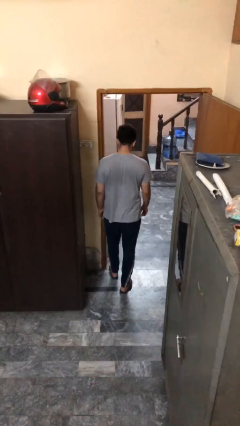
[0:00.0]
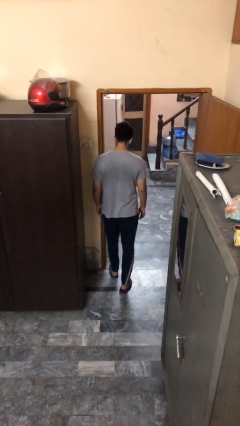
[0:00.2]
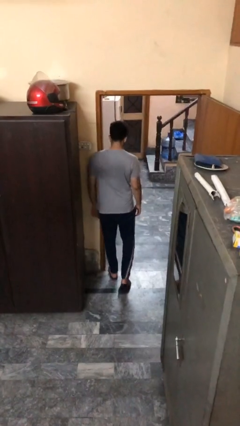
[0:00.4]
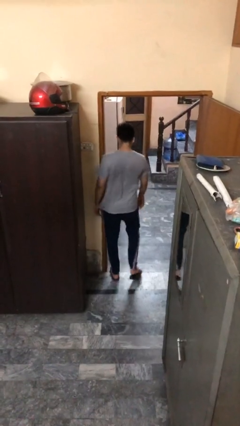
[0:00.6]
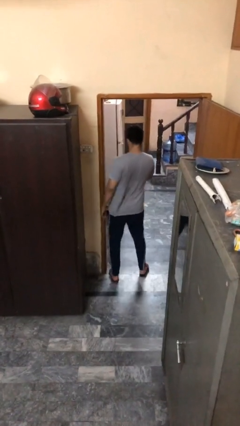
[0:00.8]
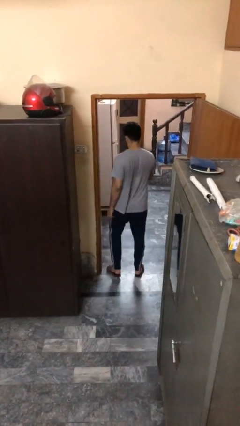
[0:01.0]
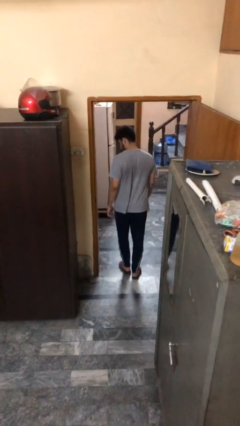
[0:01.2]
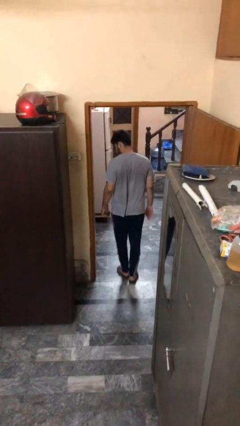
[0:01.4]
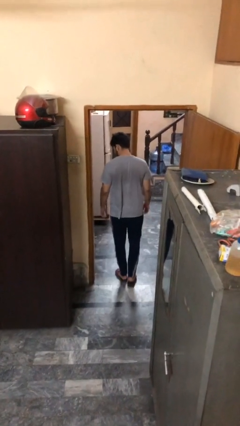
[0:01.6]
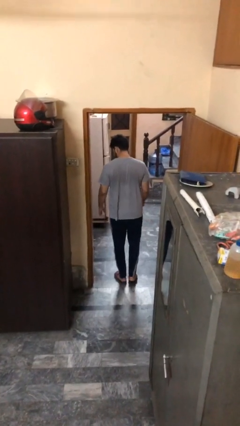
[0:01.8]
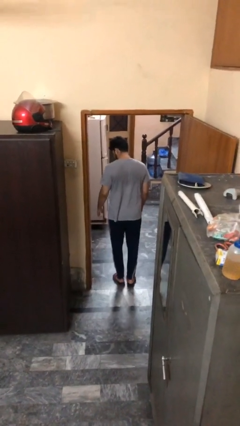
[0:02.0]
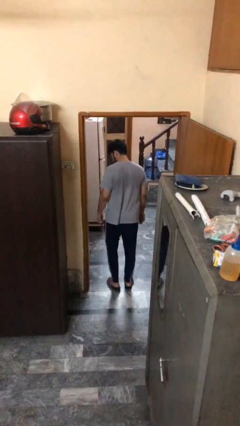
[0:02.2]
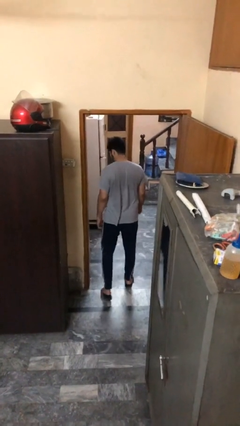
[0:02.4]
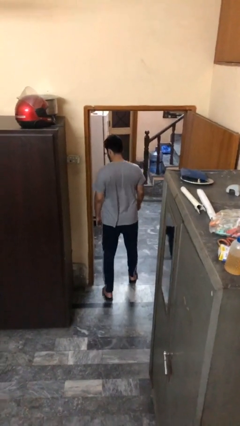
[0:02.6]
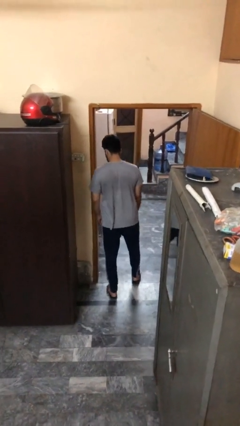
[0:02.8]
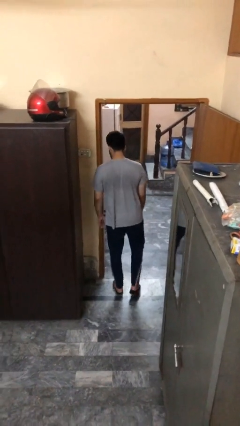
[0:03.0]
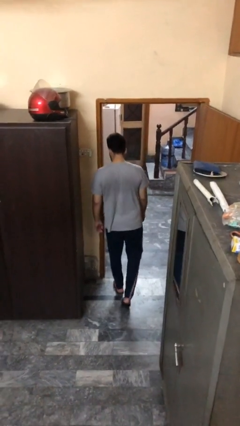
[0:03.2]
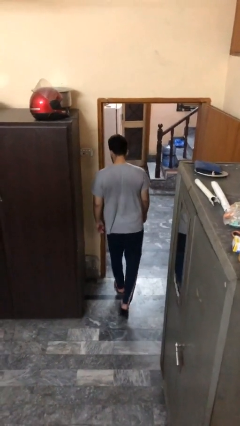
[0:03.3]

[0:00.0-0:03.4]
person bumps into wall

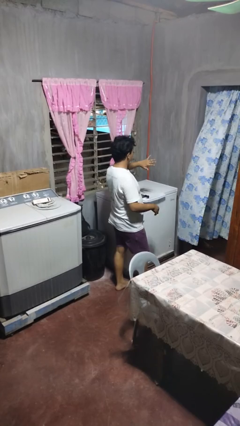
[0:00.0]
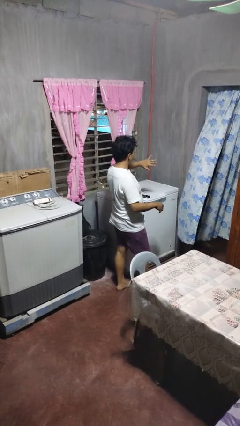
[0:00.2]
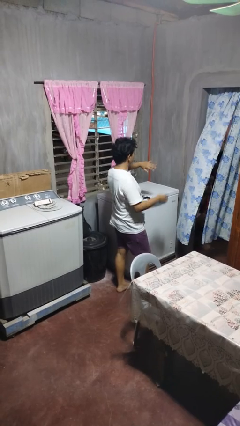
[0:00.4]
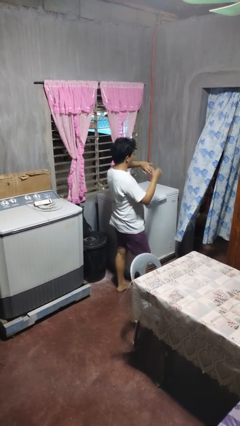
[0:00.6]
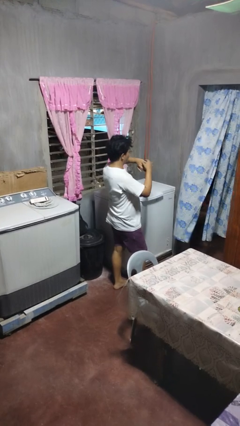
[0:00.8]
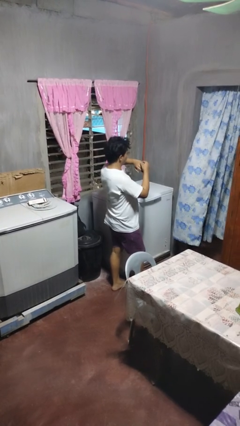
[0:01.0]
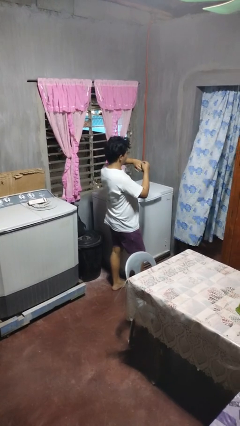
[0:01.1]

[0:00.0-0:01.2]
person takes off ring

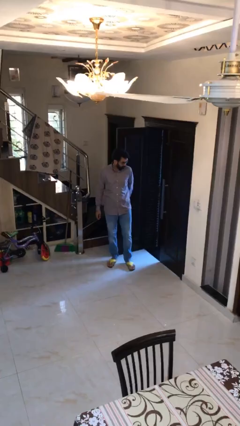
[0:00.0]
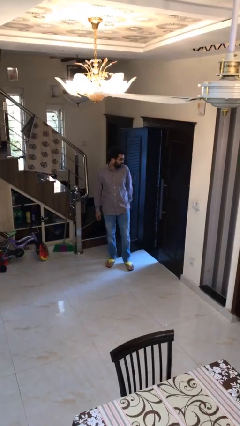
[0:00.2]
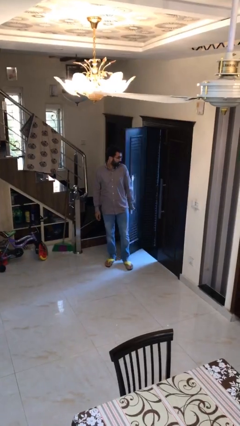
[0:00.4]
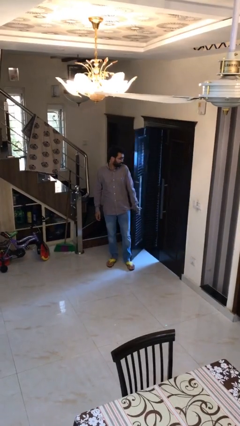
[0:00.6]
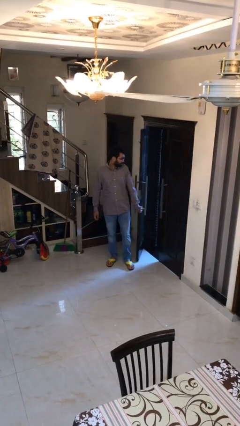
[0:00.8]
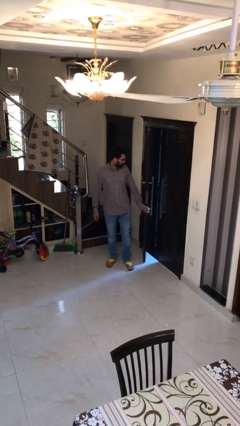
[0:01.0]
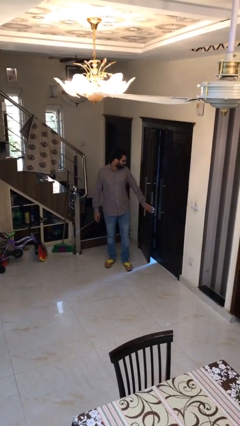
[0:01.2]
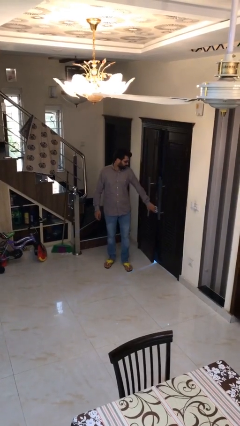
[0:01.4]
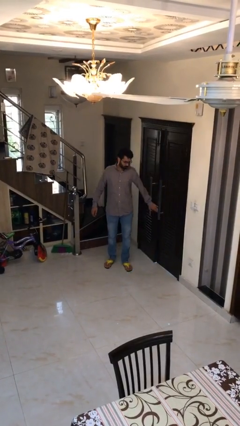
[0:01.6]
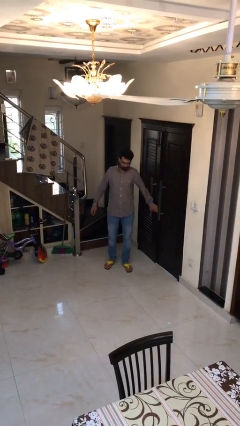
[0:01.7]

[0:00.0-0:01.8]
person closes facility door

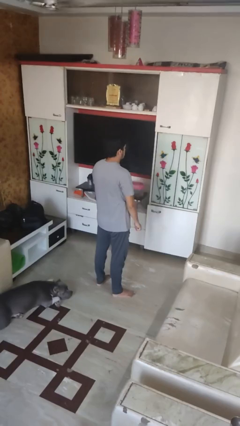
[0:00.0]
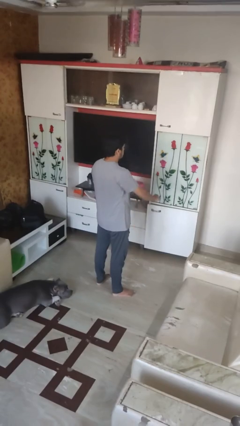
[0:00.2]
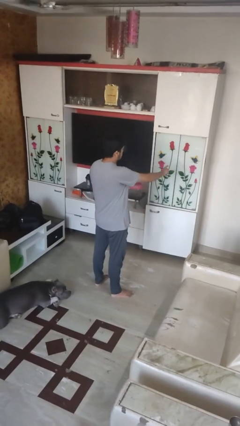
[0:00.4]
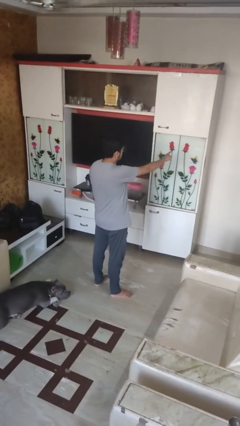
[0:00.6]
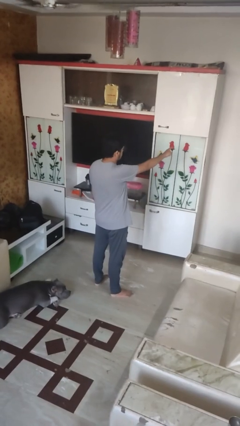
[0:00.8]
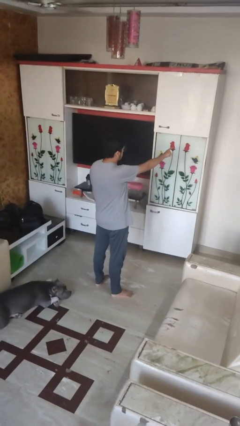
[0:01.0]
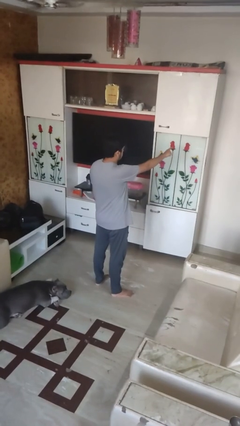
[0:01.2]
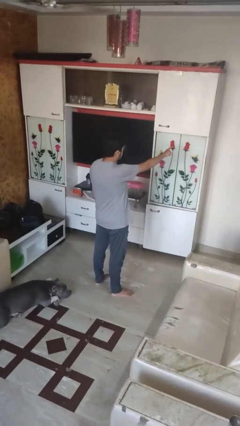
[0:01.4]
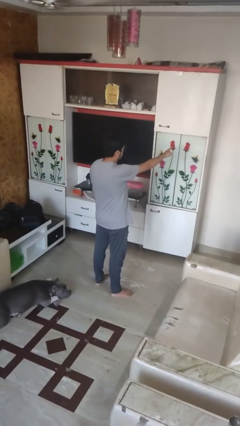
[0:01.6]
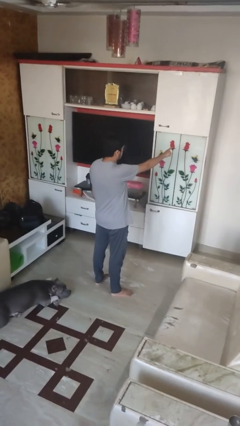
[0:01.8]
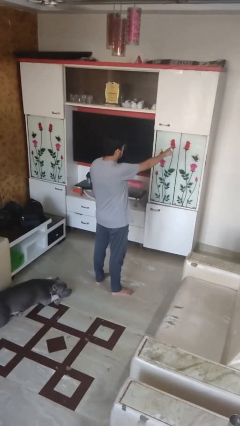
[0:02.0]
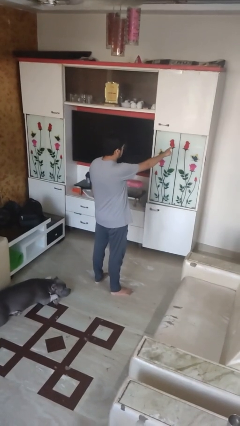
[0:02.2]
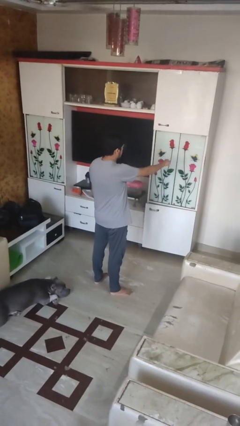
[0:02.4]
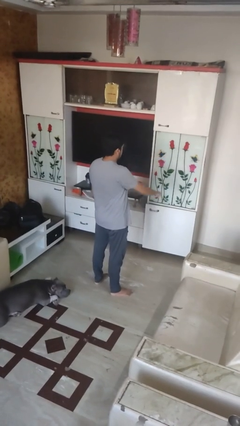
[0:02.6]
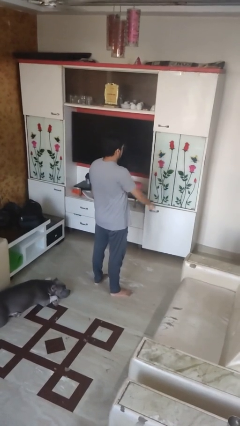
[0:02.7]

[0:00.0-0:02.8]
person points at person

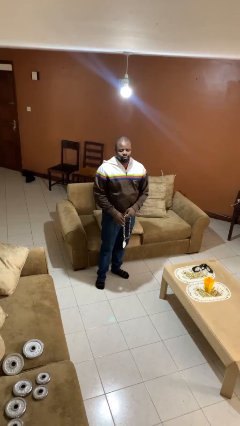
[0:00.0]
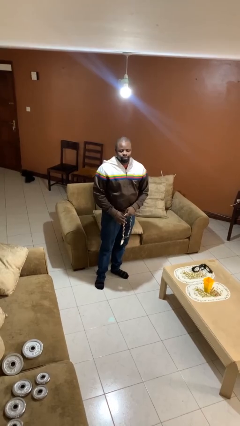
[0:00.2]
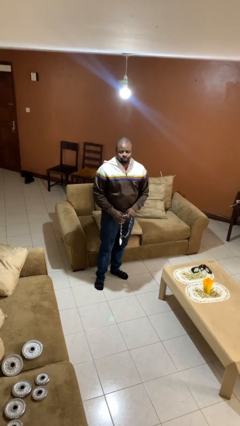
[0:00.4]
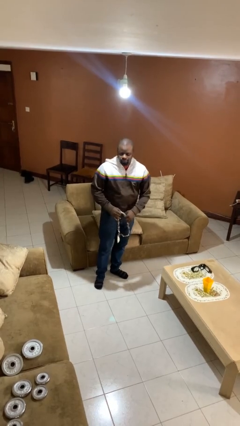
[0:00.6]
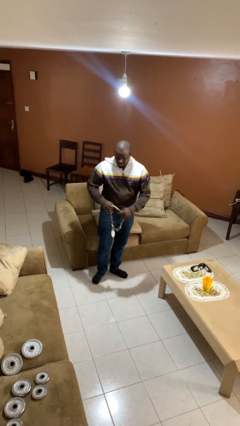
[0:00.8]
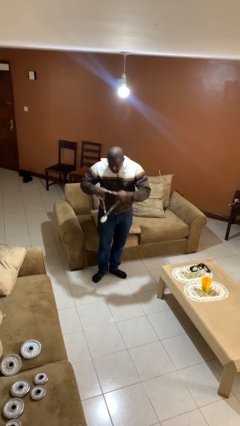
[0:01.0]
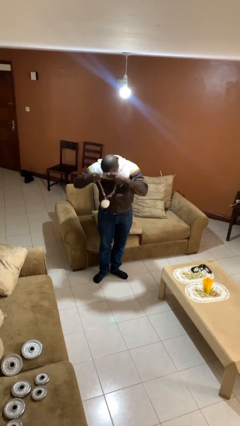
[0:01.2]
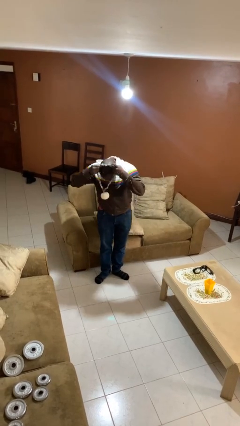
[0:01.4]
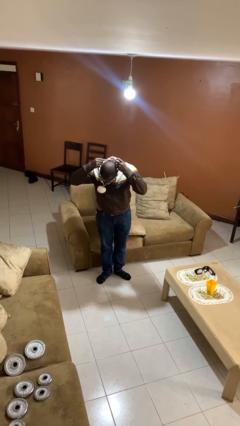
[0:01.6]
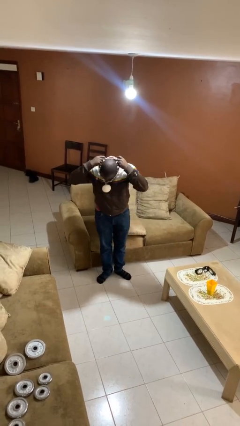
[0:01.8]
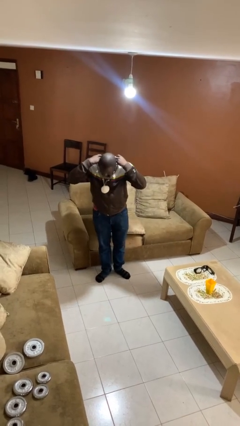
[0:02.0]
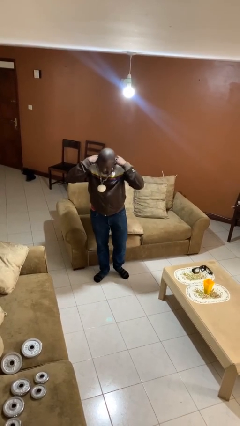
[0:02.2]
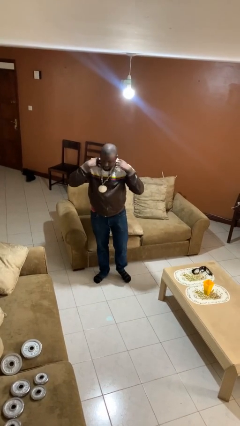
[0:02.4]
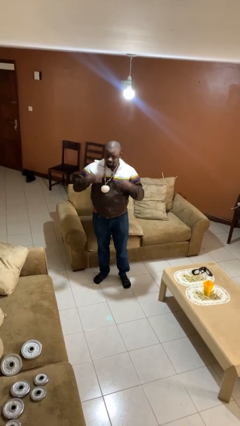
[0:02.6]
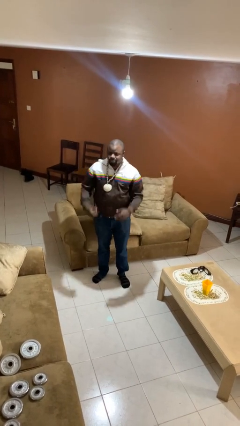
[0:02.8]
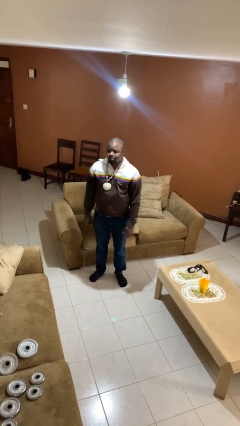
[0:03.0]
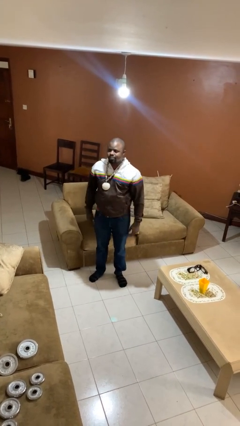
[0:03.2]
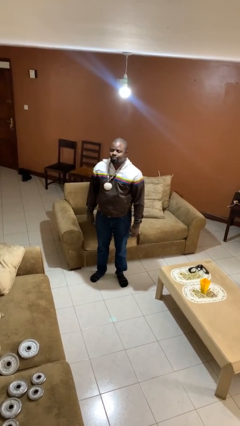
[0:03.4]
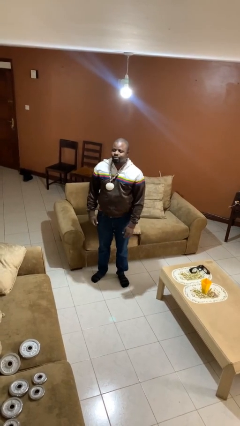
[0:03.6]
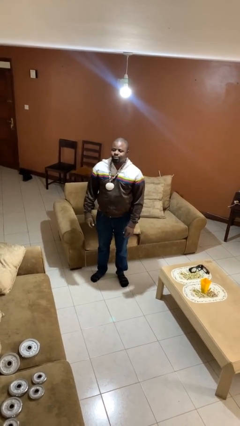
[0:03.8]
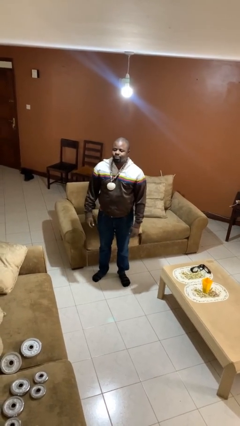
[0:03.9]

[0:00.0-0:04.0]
person puts on necklace

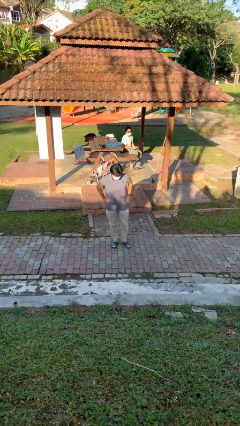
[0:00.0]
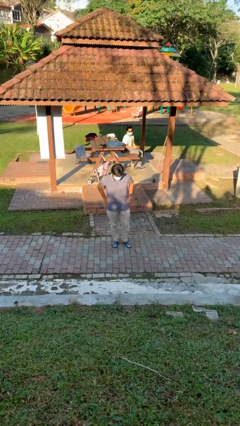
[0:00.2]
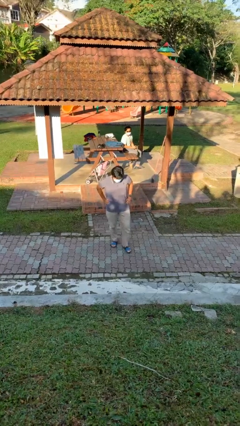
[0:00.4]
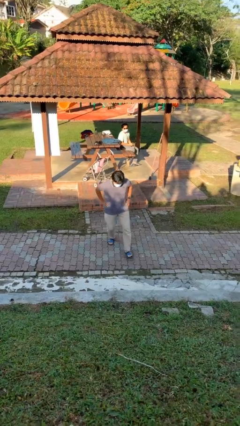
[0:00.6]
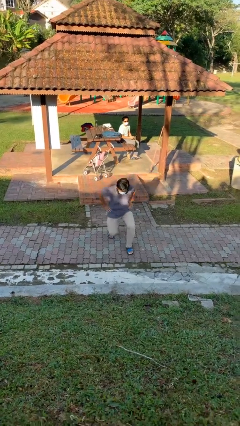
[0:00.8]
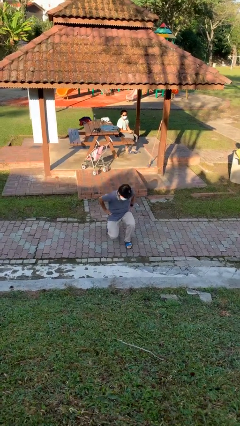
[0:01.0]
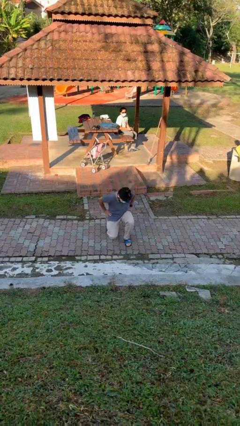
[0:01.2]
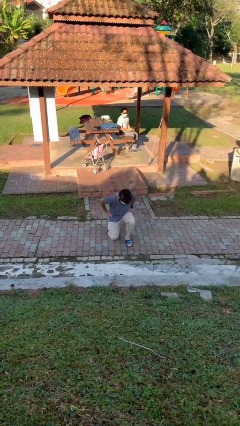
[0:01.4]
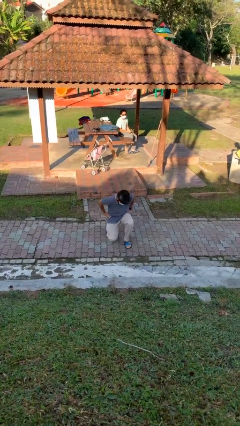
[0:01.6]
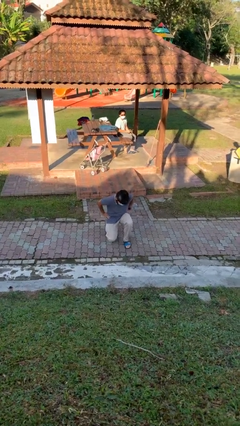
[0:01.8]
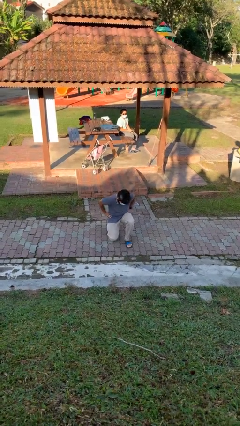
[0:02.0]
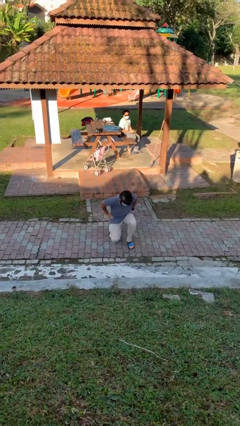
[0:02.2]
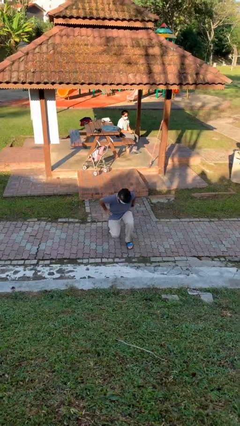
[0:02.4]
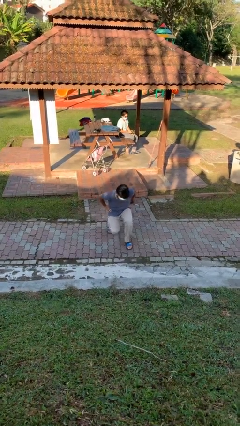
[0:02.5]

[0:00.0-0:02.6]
person kneels

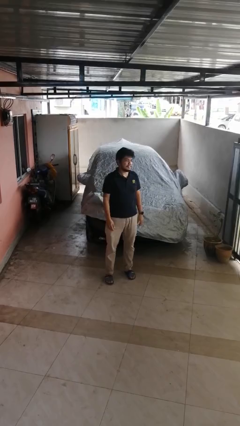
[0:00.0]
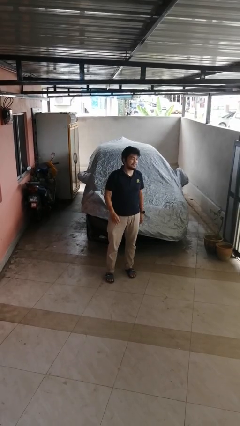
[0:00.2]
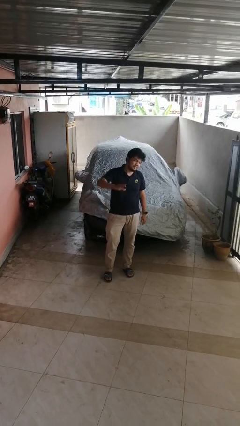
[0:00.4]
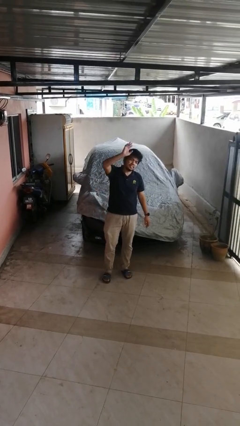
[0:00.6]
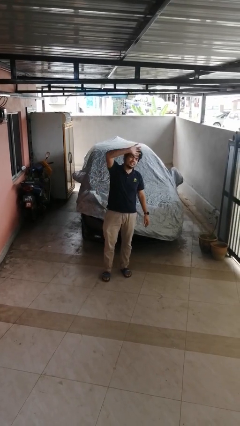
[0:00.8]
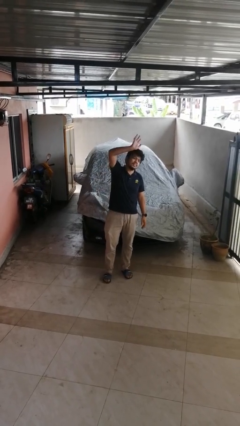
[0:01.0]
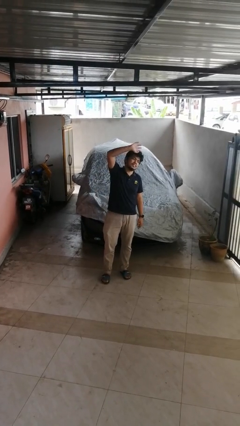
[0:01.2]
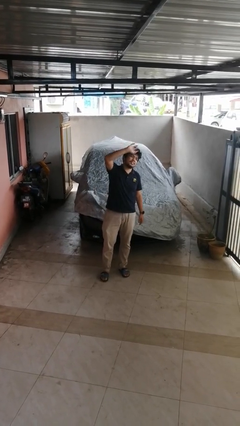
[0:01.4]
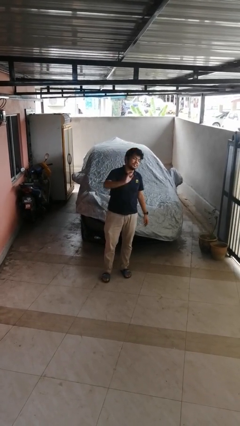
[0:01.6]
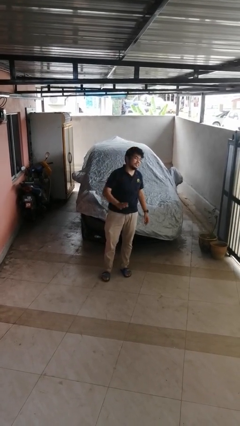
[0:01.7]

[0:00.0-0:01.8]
person waves at person
